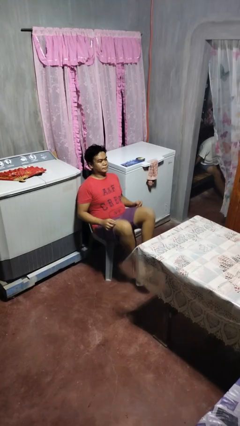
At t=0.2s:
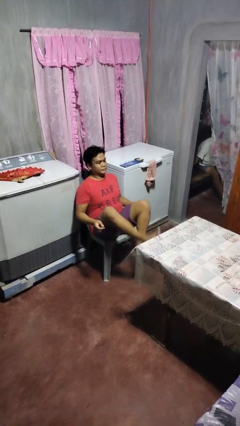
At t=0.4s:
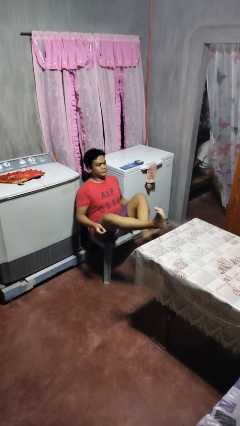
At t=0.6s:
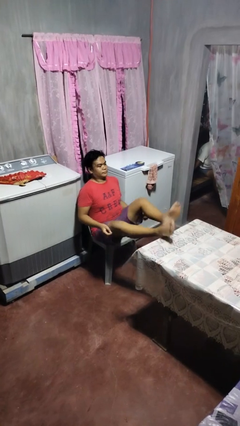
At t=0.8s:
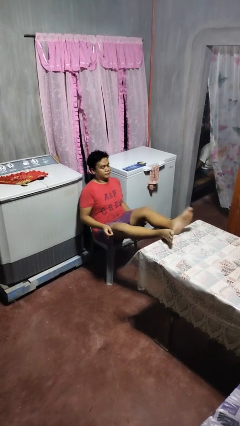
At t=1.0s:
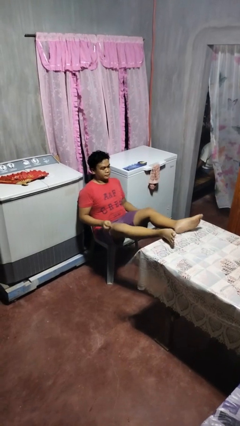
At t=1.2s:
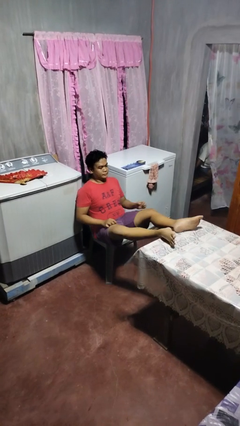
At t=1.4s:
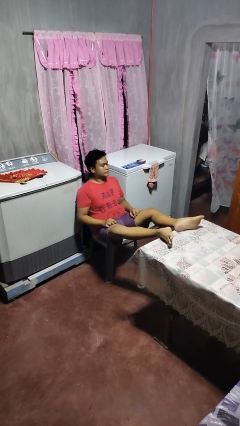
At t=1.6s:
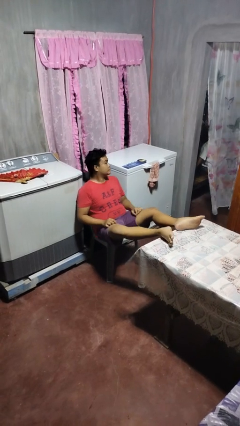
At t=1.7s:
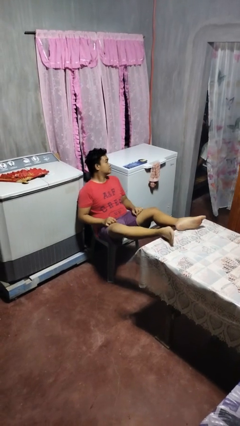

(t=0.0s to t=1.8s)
person puts feet up

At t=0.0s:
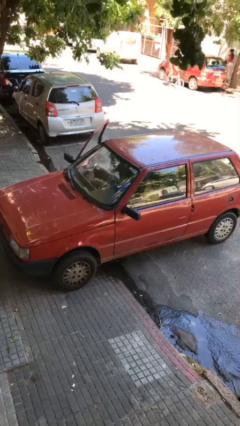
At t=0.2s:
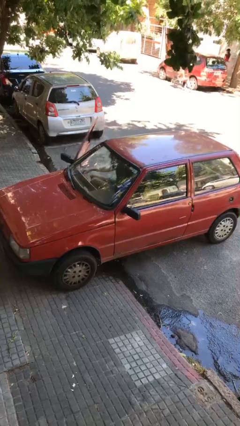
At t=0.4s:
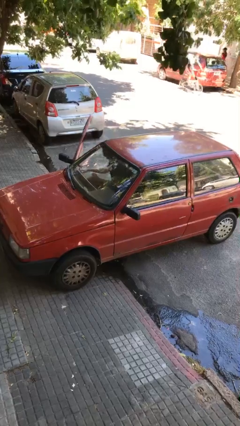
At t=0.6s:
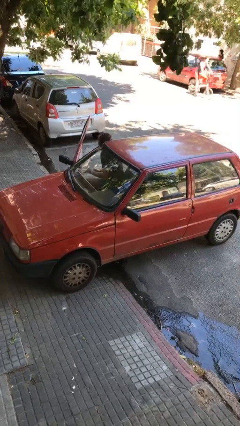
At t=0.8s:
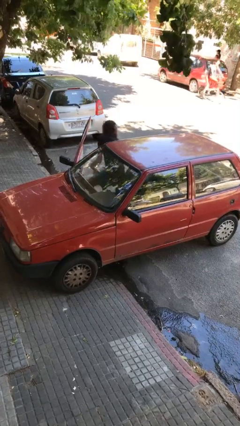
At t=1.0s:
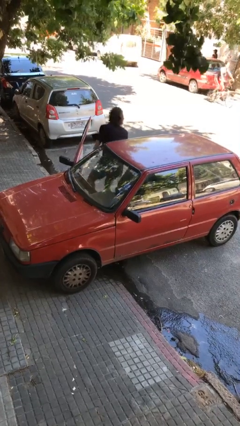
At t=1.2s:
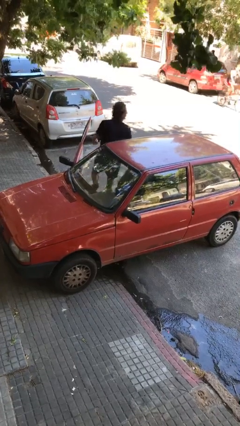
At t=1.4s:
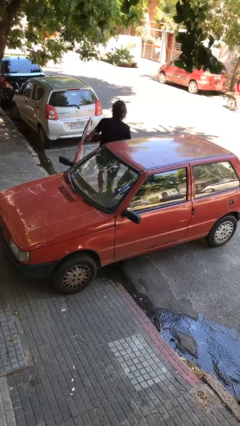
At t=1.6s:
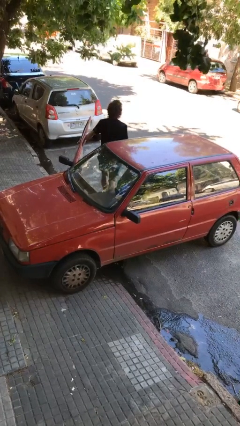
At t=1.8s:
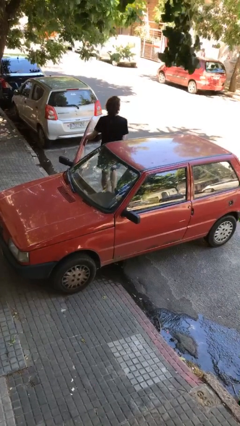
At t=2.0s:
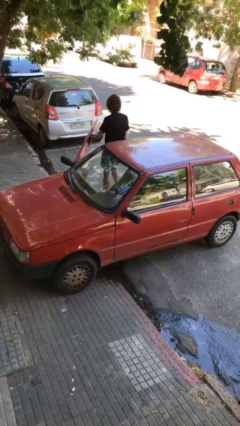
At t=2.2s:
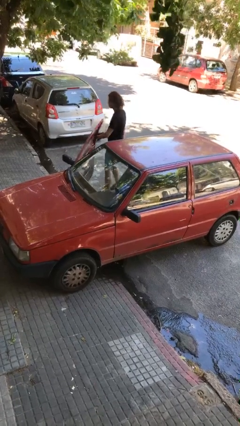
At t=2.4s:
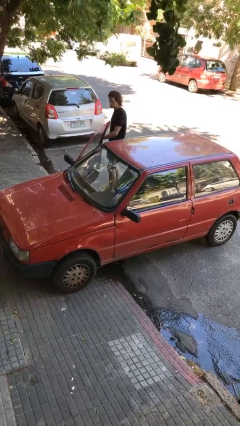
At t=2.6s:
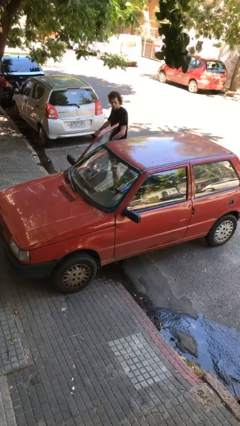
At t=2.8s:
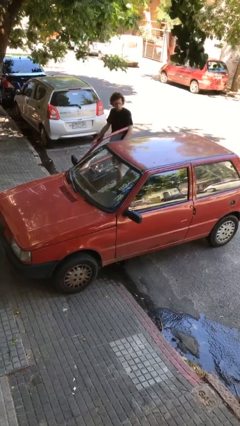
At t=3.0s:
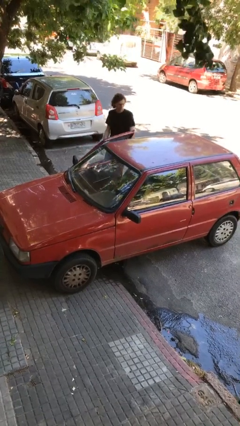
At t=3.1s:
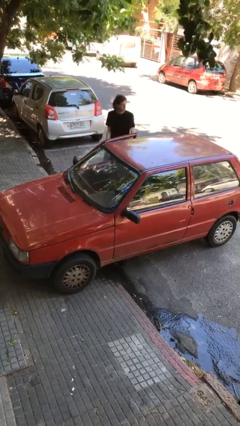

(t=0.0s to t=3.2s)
car drops off person

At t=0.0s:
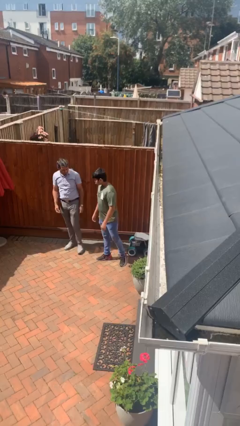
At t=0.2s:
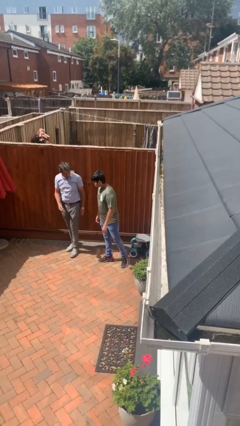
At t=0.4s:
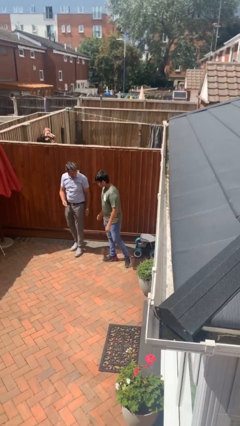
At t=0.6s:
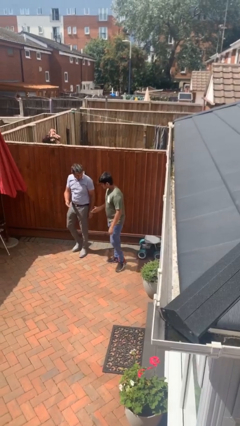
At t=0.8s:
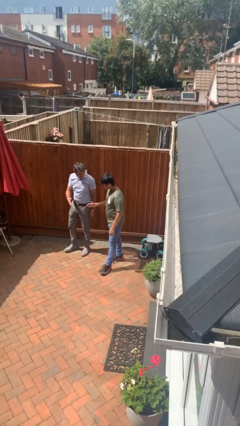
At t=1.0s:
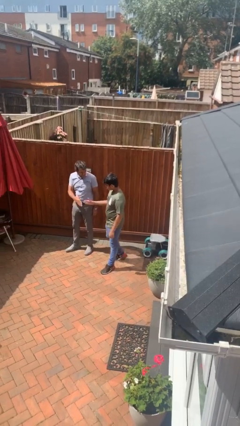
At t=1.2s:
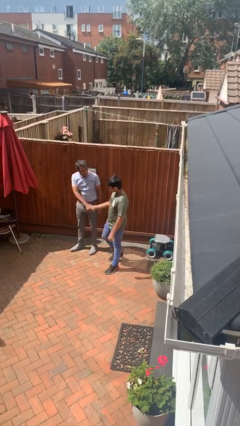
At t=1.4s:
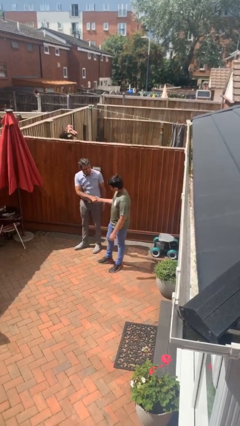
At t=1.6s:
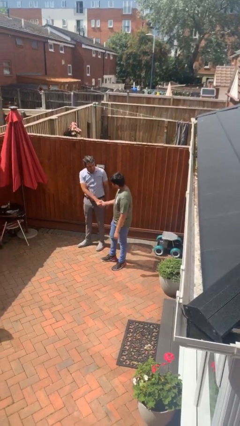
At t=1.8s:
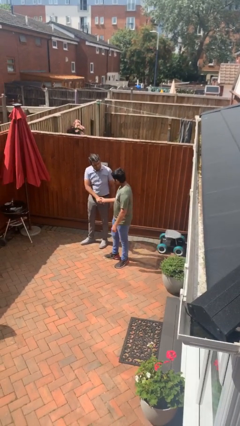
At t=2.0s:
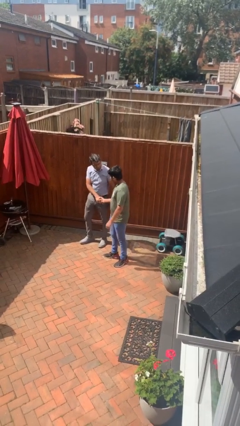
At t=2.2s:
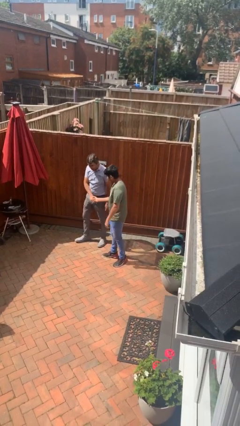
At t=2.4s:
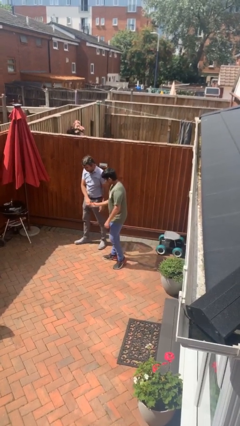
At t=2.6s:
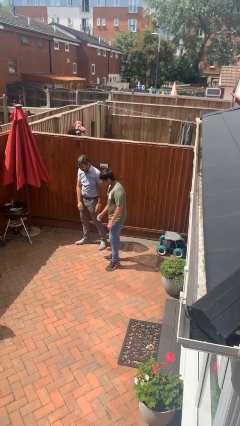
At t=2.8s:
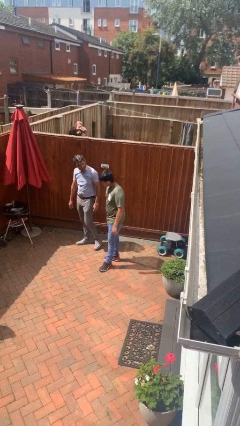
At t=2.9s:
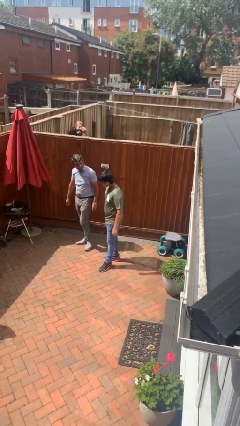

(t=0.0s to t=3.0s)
person shakes hand

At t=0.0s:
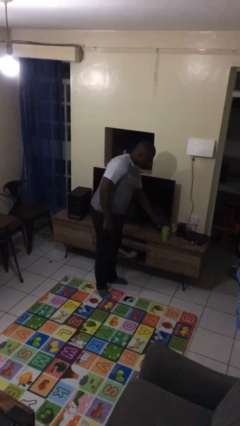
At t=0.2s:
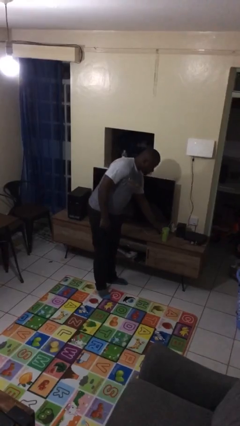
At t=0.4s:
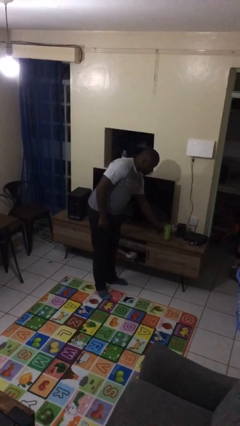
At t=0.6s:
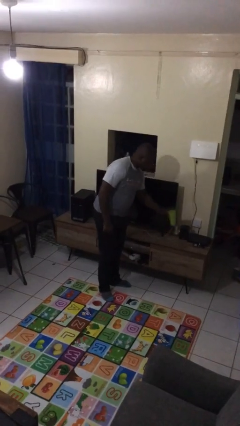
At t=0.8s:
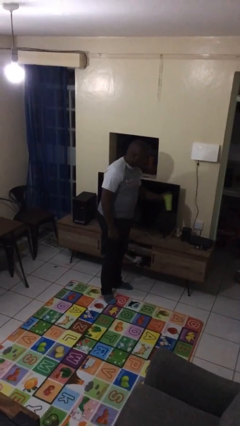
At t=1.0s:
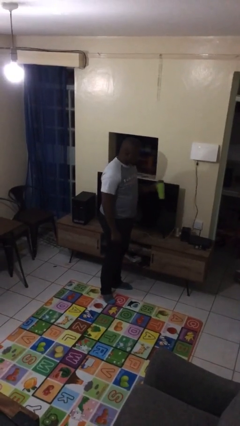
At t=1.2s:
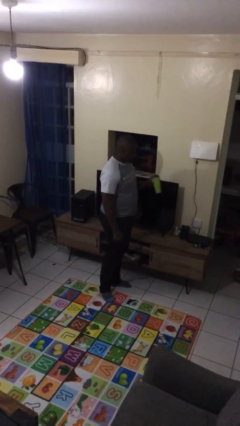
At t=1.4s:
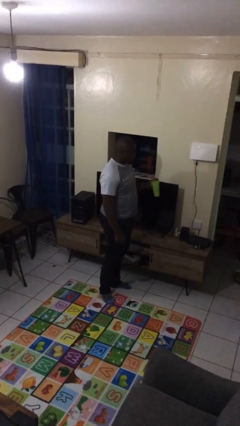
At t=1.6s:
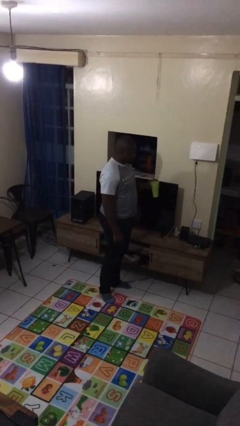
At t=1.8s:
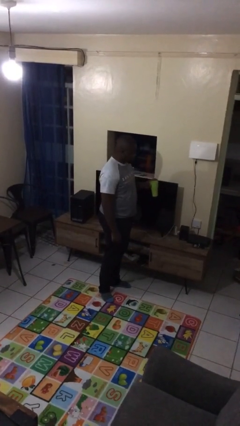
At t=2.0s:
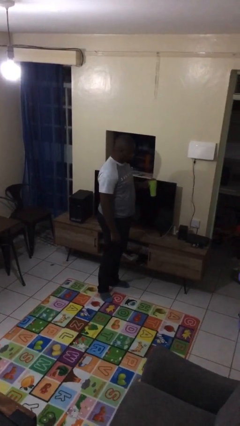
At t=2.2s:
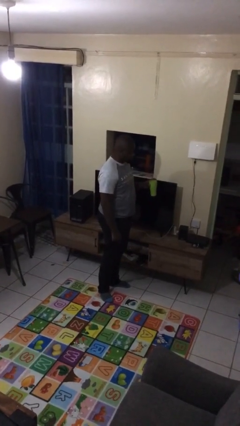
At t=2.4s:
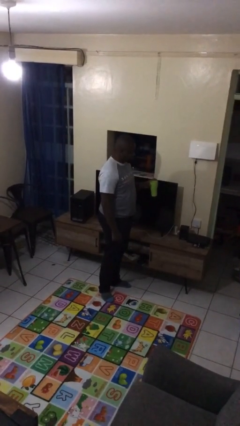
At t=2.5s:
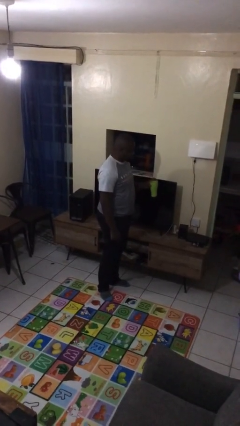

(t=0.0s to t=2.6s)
person picks up object from countertop

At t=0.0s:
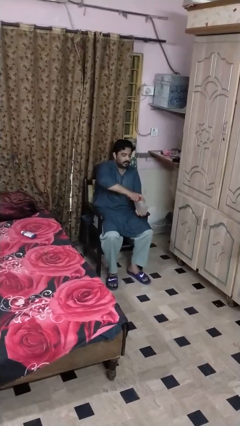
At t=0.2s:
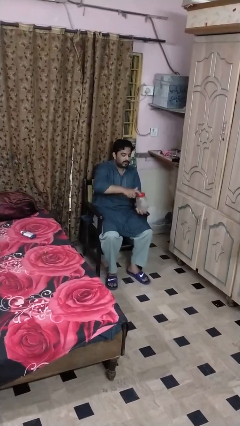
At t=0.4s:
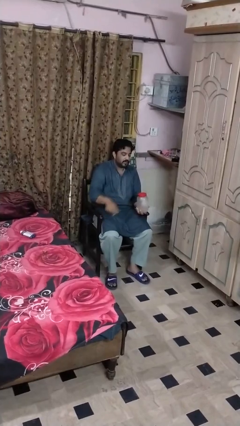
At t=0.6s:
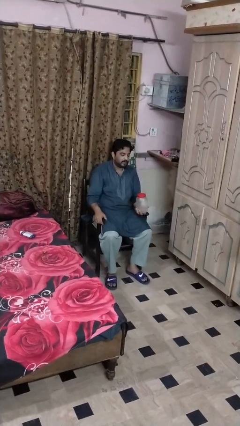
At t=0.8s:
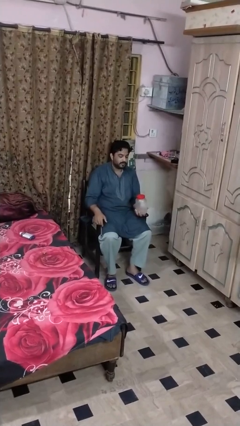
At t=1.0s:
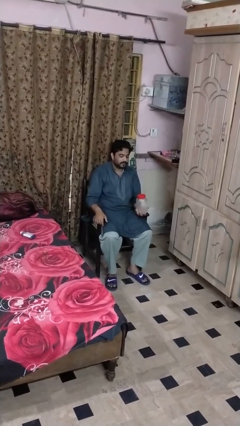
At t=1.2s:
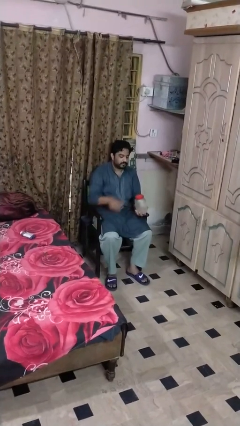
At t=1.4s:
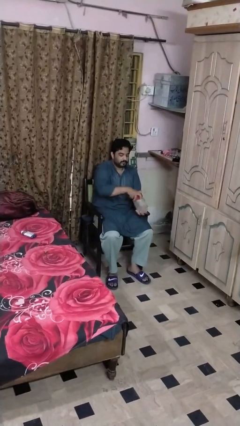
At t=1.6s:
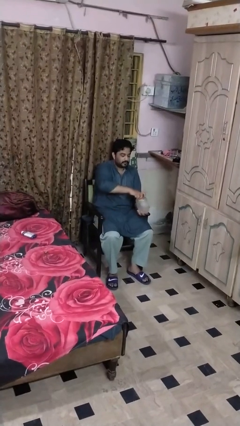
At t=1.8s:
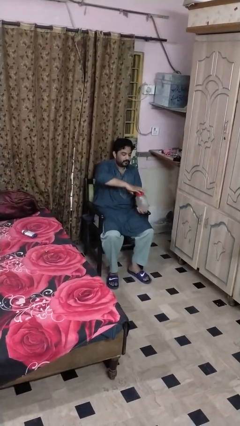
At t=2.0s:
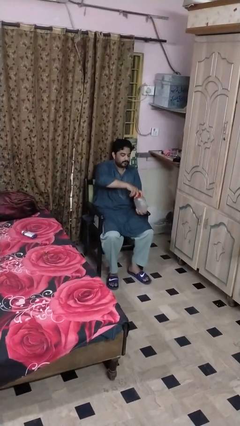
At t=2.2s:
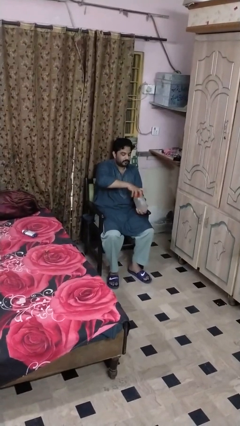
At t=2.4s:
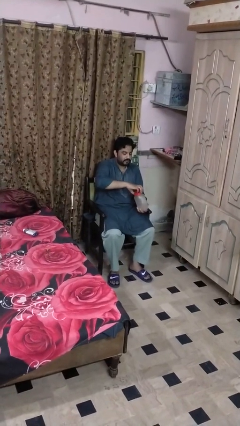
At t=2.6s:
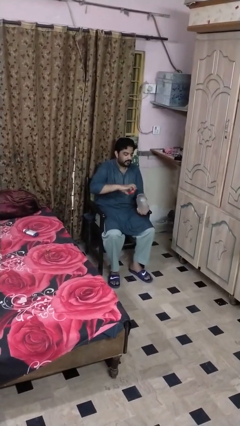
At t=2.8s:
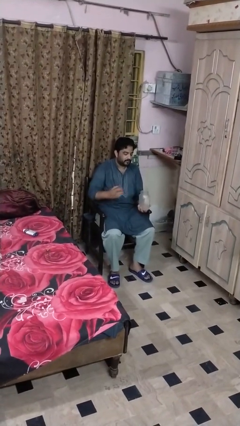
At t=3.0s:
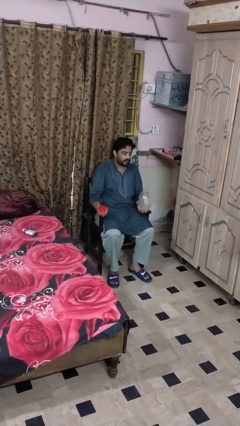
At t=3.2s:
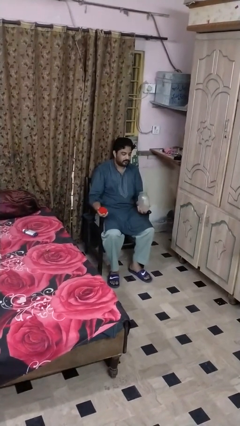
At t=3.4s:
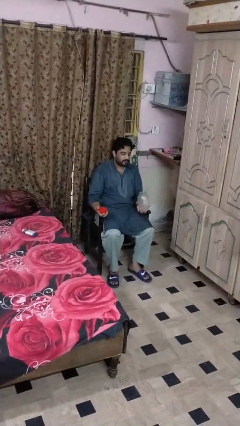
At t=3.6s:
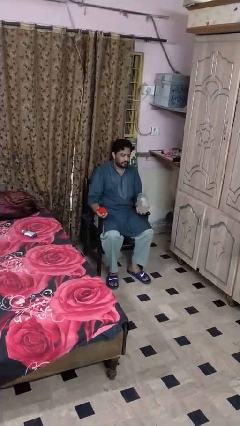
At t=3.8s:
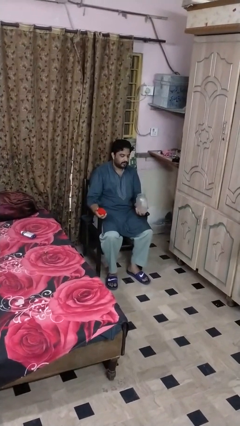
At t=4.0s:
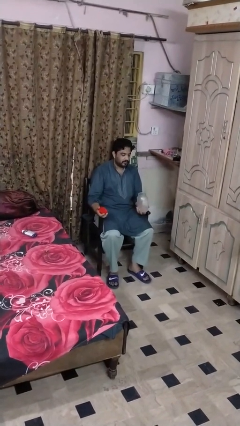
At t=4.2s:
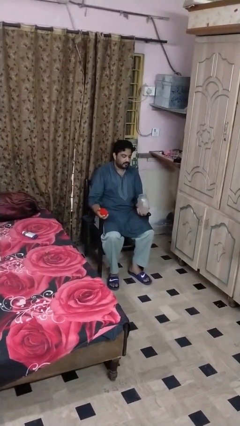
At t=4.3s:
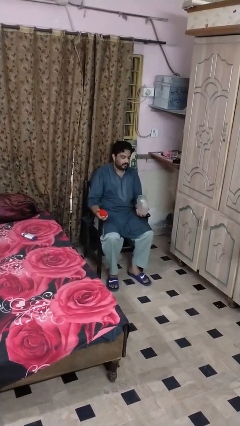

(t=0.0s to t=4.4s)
person opens jar

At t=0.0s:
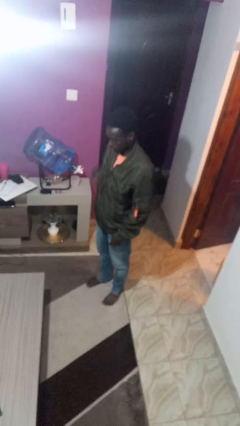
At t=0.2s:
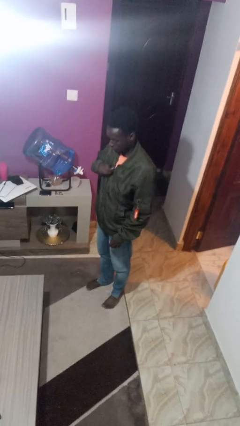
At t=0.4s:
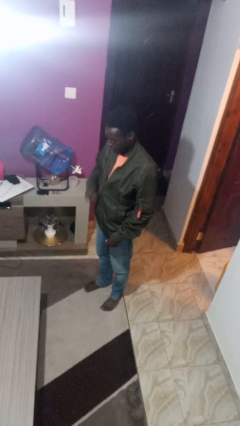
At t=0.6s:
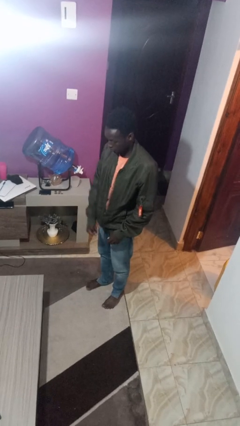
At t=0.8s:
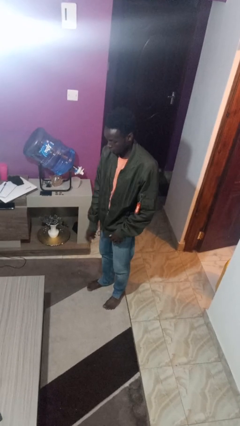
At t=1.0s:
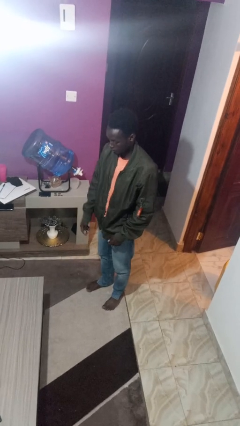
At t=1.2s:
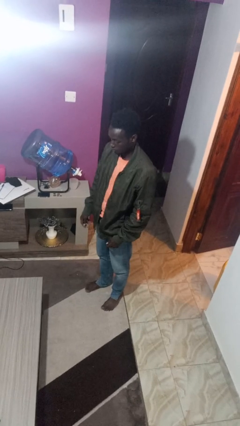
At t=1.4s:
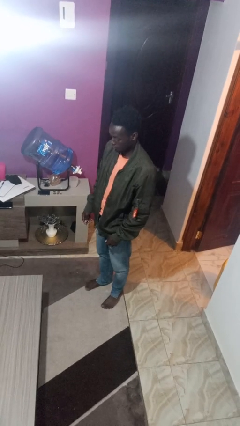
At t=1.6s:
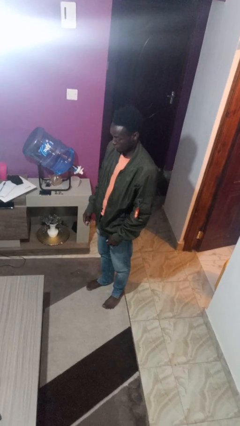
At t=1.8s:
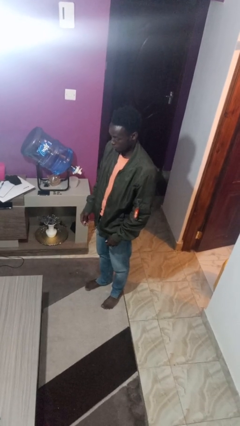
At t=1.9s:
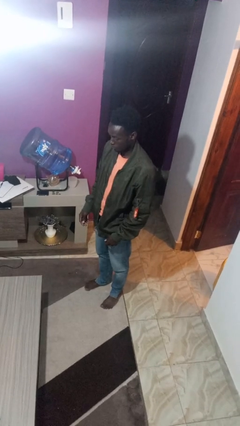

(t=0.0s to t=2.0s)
person unzips jacket

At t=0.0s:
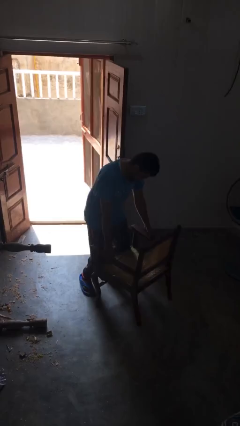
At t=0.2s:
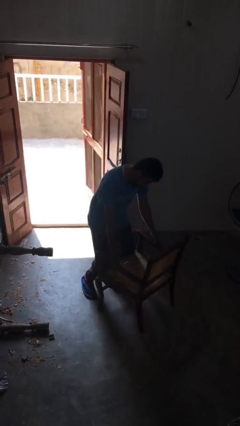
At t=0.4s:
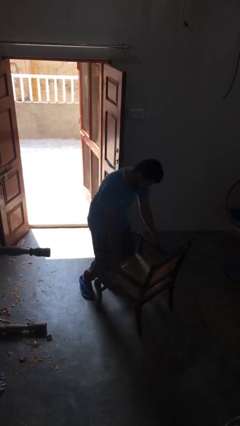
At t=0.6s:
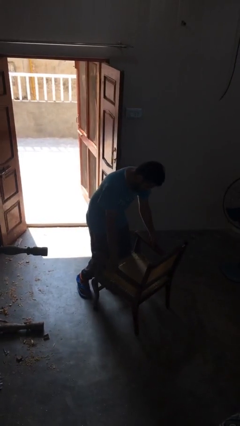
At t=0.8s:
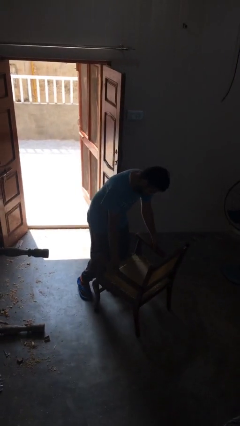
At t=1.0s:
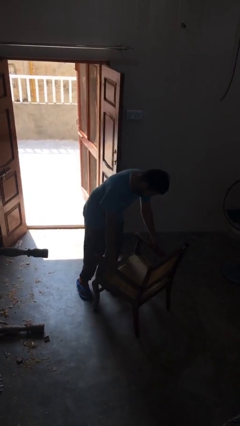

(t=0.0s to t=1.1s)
person puts down object on floor
